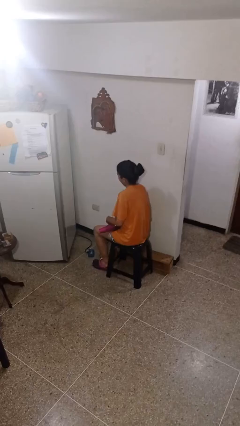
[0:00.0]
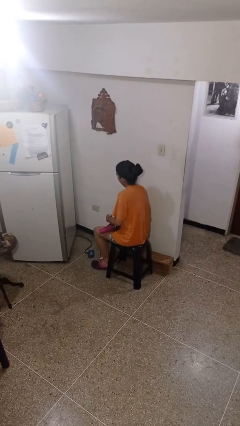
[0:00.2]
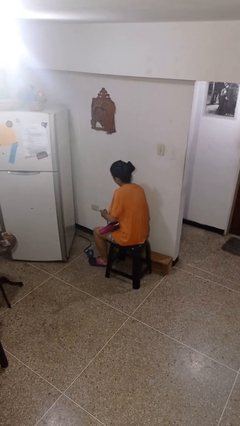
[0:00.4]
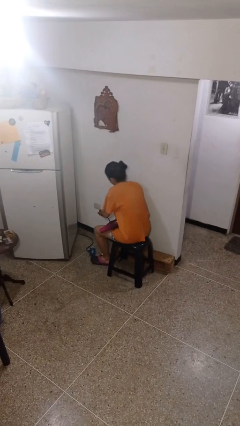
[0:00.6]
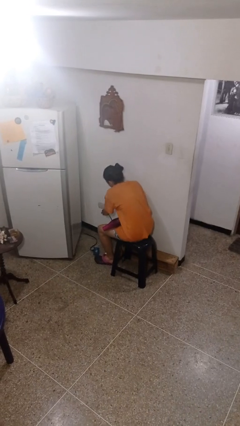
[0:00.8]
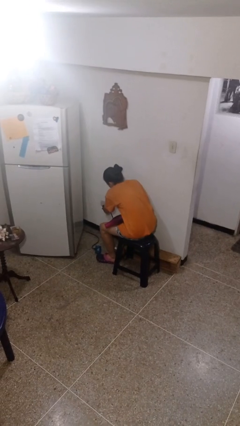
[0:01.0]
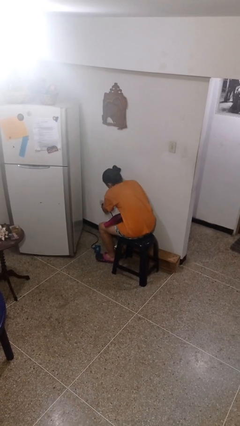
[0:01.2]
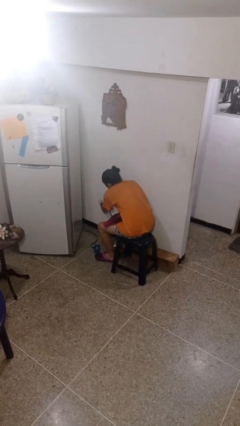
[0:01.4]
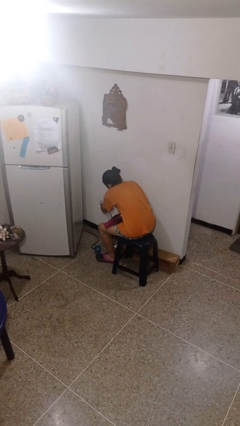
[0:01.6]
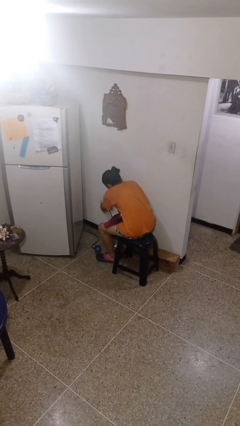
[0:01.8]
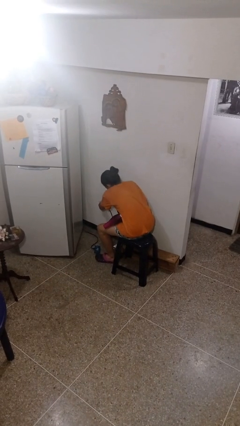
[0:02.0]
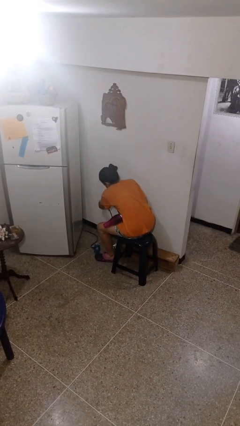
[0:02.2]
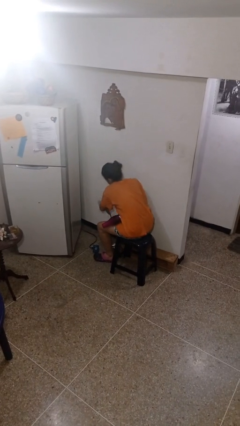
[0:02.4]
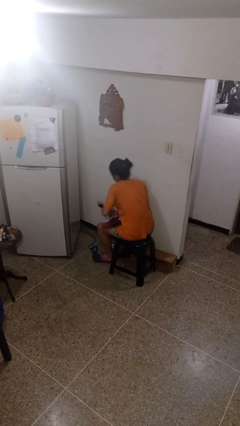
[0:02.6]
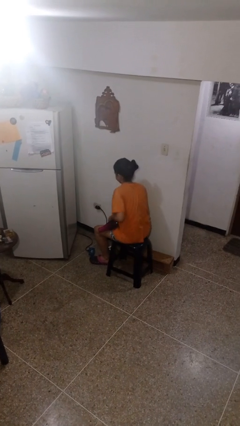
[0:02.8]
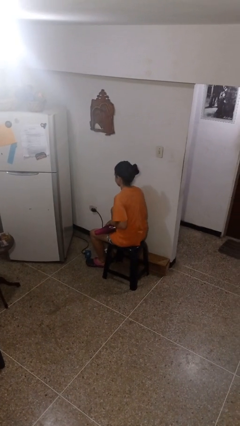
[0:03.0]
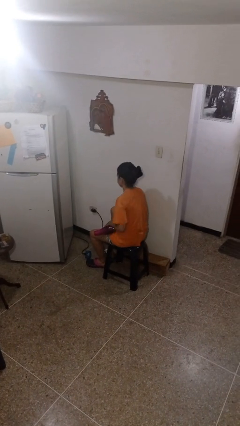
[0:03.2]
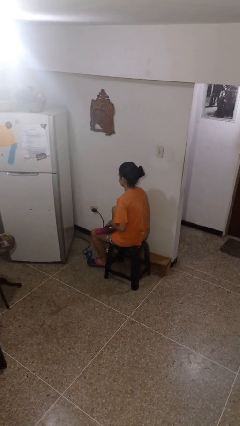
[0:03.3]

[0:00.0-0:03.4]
person plugs into electrical socket

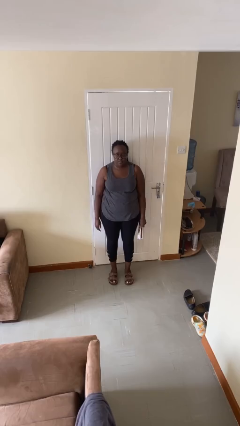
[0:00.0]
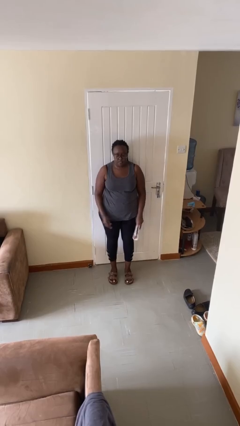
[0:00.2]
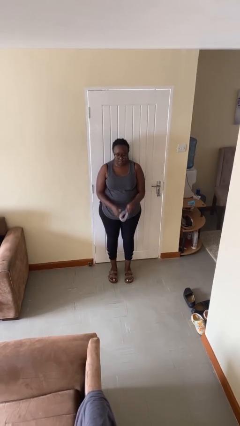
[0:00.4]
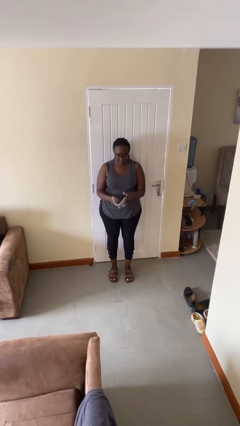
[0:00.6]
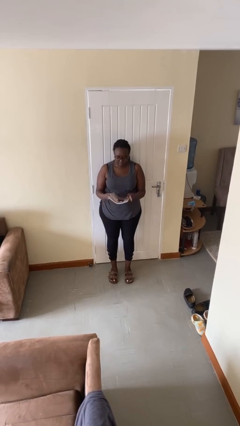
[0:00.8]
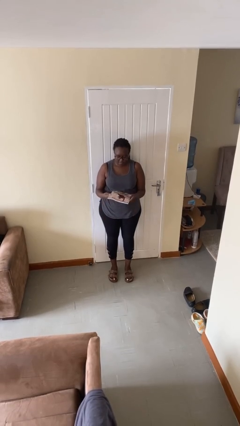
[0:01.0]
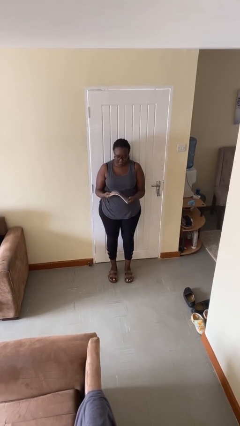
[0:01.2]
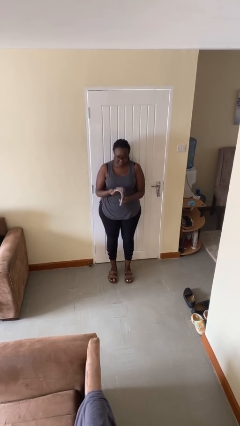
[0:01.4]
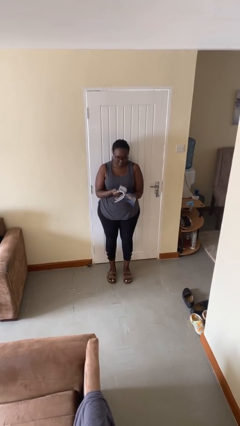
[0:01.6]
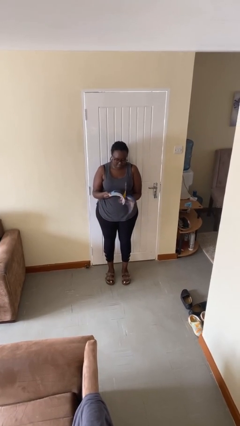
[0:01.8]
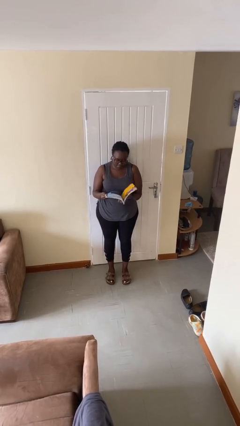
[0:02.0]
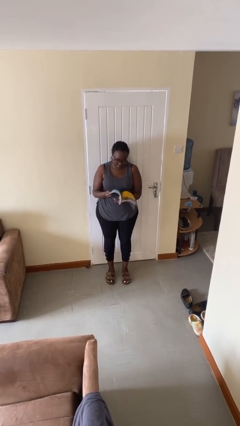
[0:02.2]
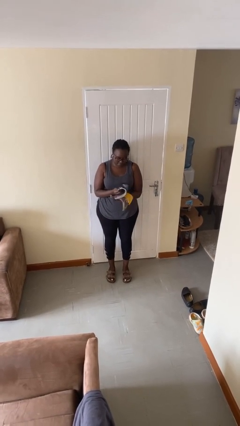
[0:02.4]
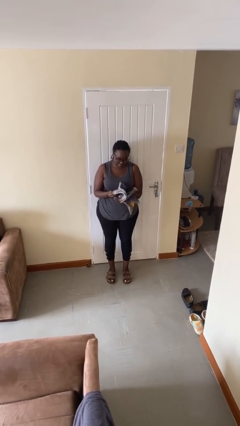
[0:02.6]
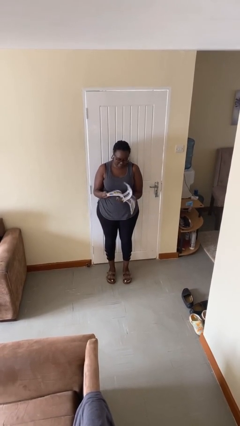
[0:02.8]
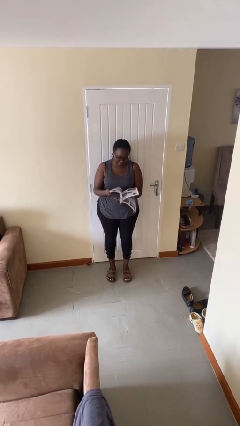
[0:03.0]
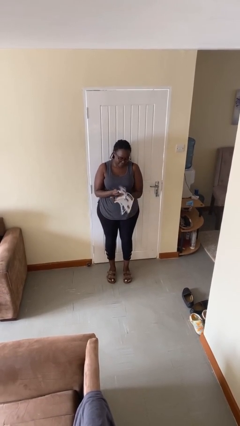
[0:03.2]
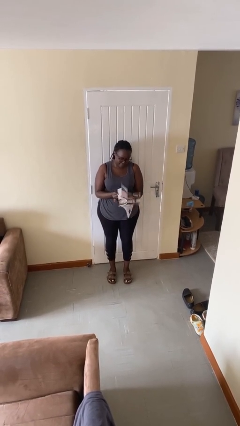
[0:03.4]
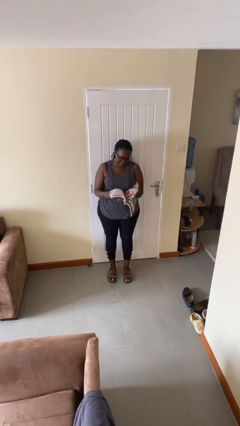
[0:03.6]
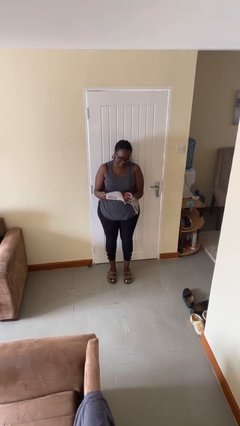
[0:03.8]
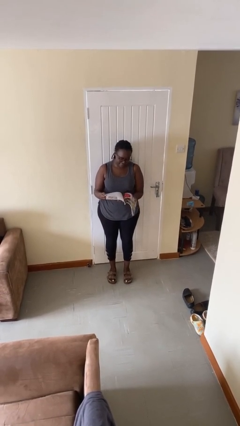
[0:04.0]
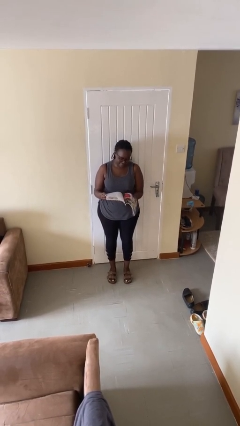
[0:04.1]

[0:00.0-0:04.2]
person reads magazine

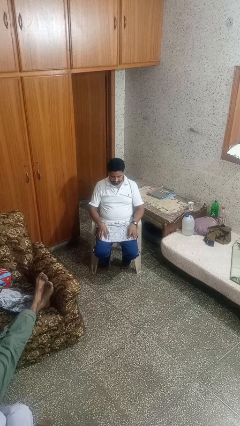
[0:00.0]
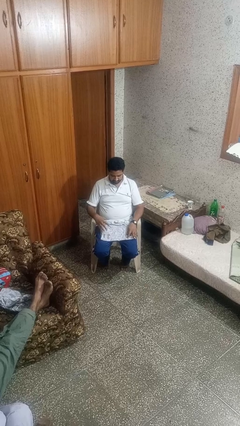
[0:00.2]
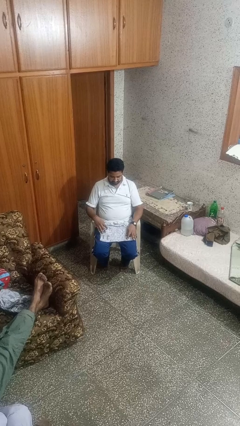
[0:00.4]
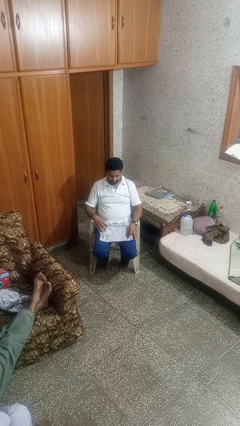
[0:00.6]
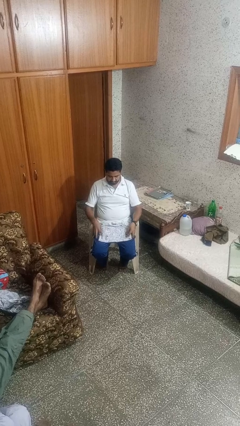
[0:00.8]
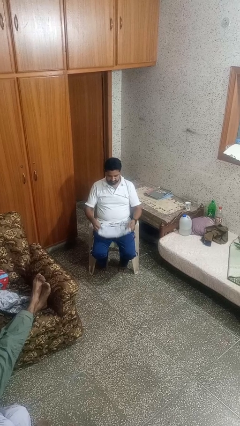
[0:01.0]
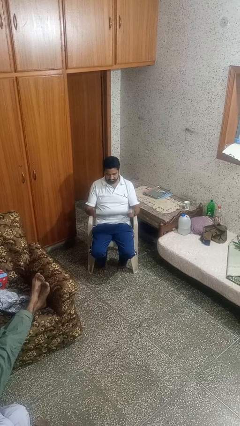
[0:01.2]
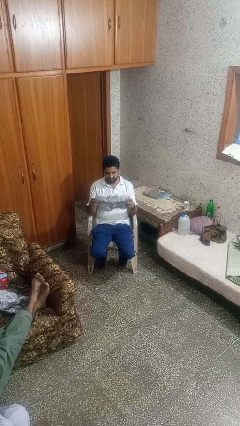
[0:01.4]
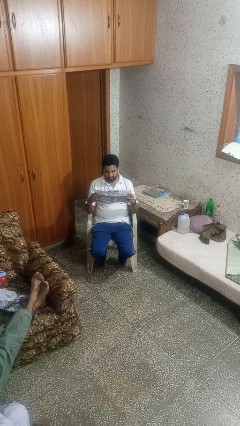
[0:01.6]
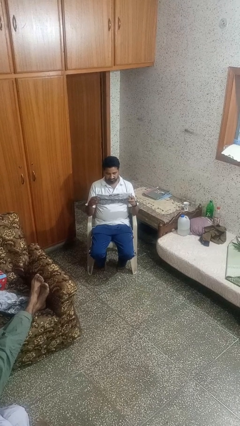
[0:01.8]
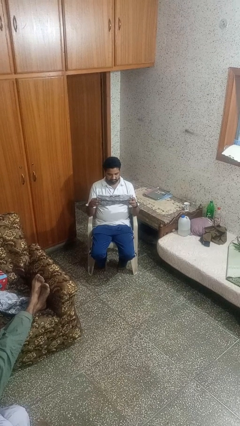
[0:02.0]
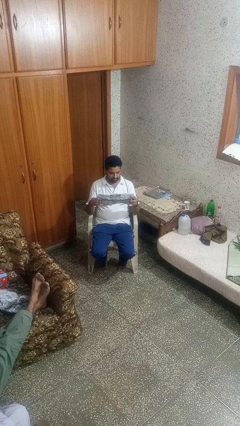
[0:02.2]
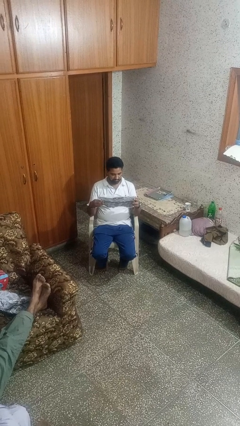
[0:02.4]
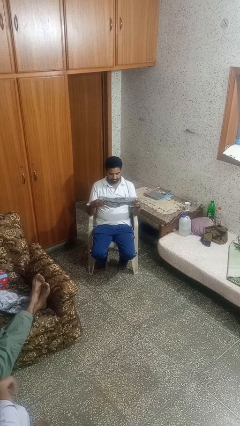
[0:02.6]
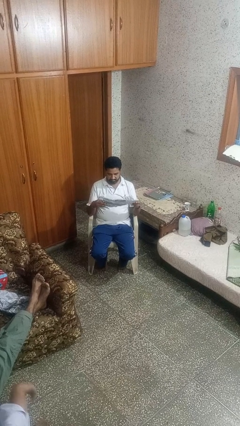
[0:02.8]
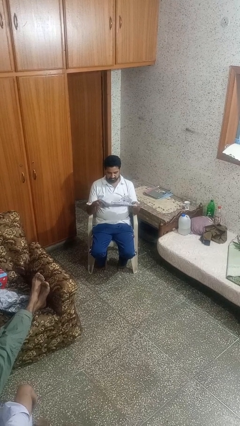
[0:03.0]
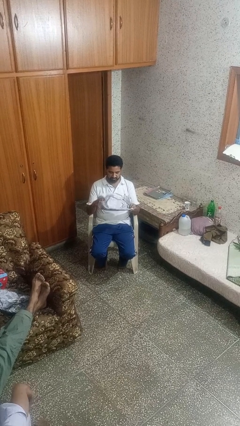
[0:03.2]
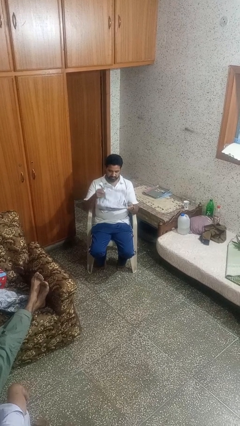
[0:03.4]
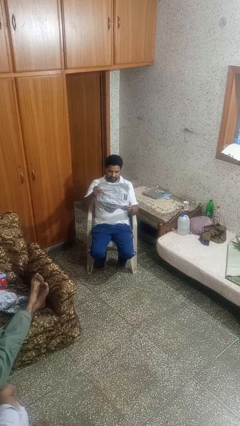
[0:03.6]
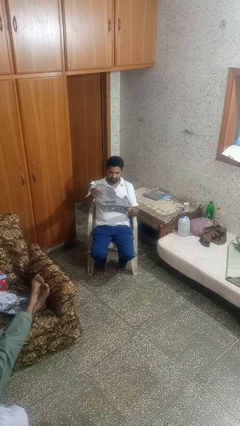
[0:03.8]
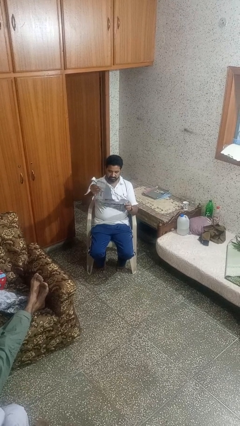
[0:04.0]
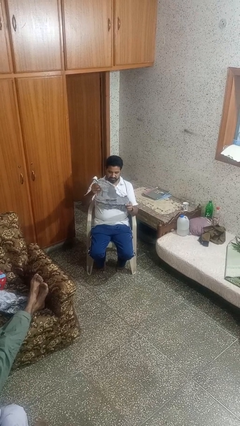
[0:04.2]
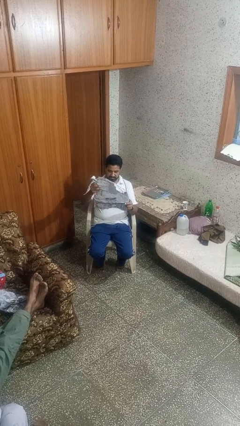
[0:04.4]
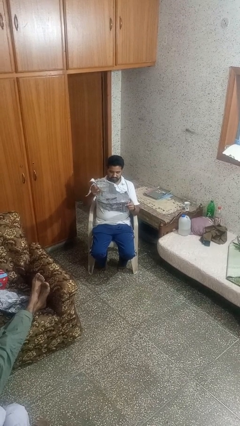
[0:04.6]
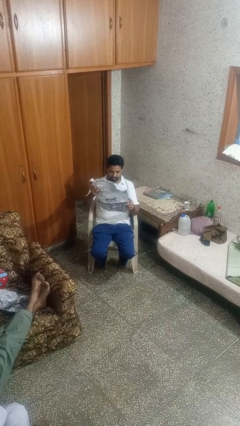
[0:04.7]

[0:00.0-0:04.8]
person reads newspaper

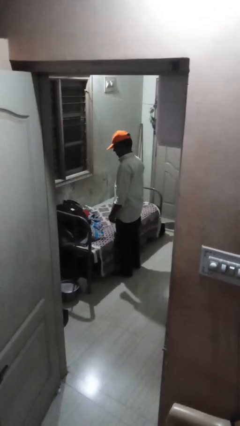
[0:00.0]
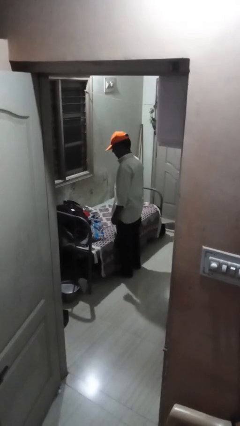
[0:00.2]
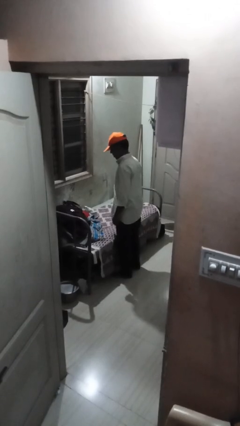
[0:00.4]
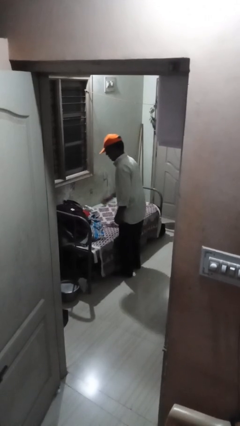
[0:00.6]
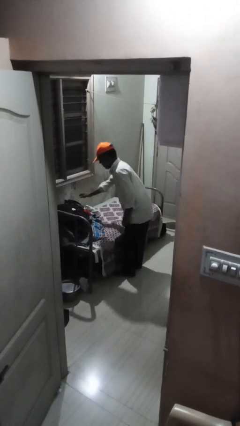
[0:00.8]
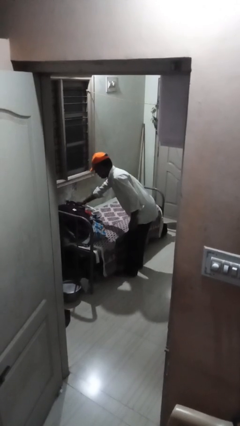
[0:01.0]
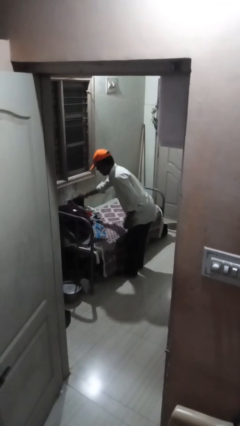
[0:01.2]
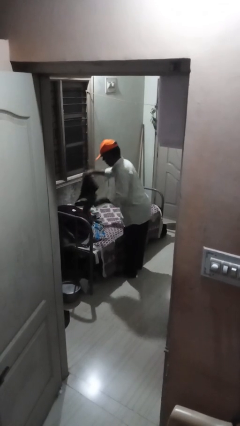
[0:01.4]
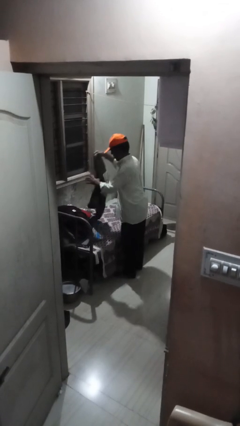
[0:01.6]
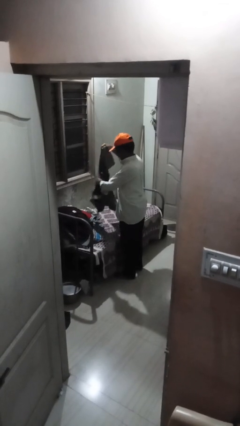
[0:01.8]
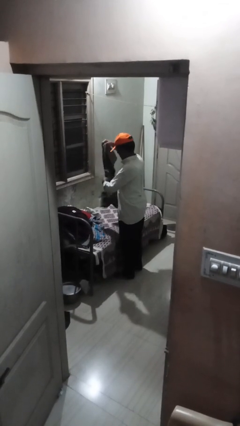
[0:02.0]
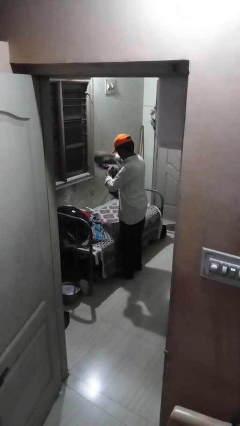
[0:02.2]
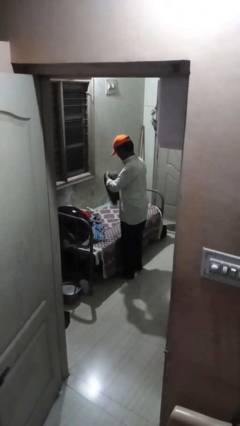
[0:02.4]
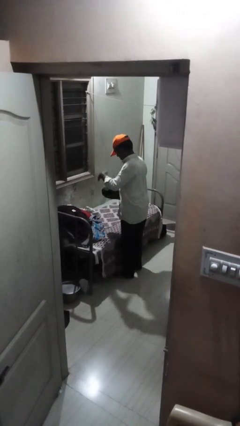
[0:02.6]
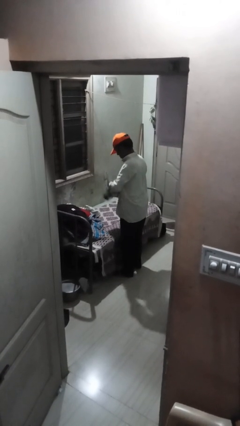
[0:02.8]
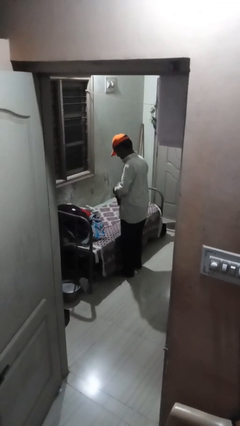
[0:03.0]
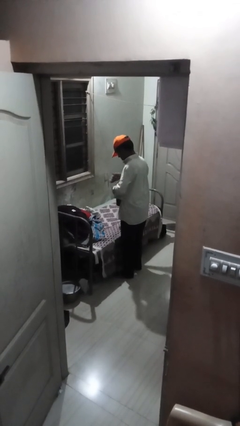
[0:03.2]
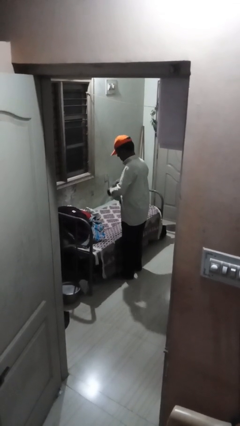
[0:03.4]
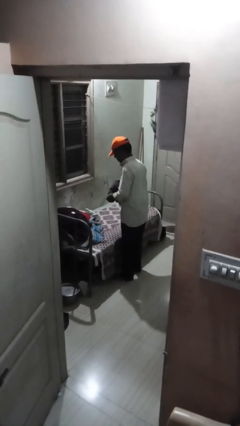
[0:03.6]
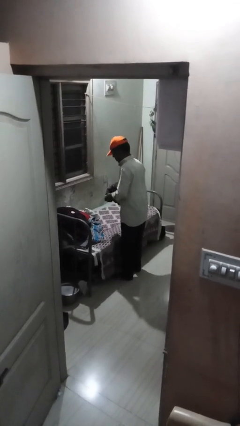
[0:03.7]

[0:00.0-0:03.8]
person folds pants

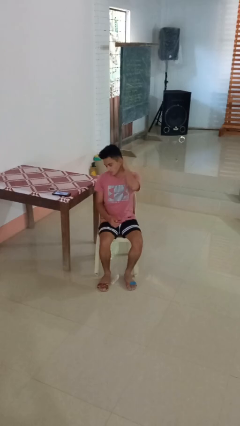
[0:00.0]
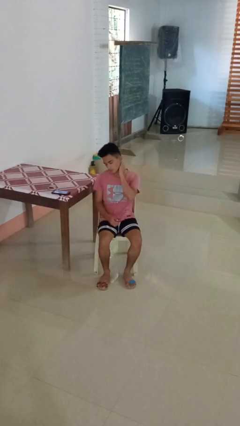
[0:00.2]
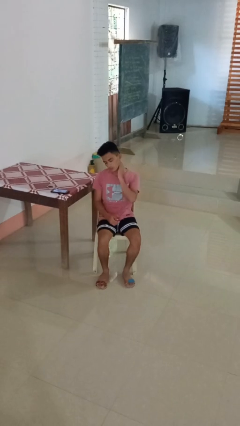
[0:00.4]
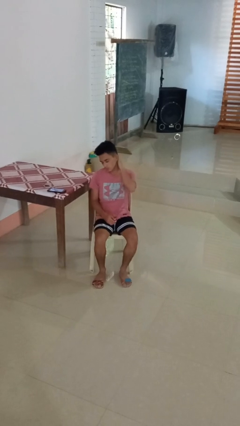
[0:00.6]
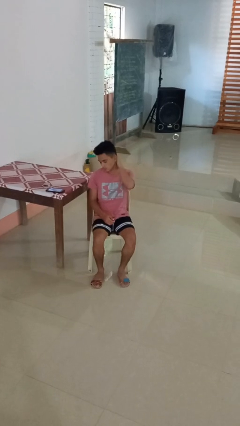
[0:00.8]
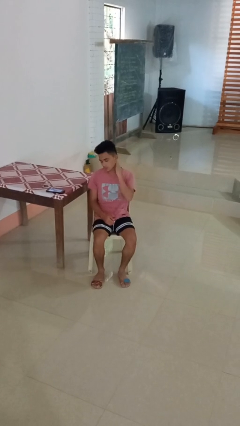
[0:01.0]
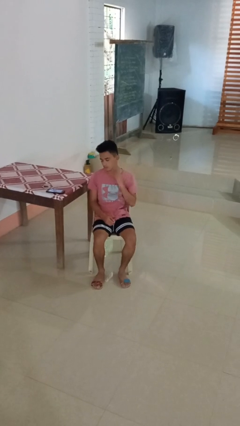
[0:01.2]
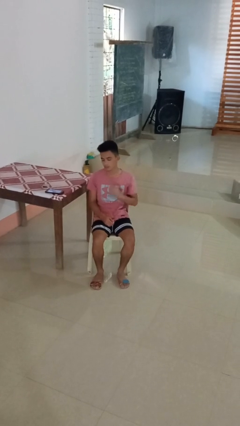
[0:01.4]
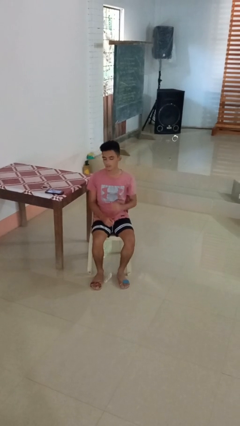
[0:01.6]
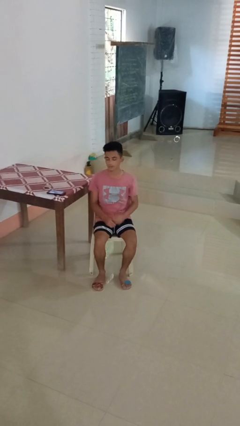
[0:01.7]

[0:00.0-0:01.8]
person rubs neck
